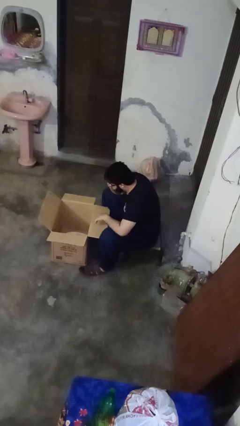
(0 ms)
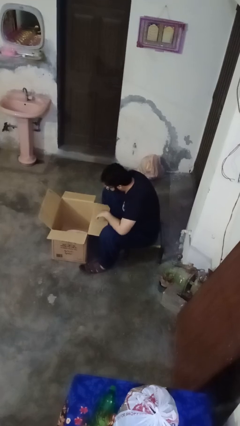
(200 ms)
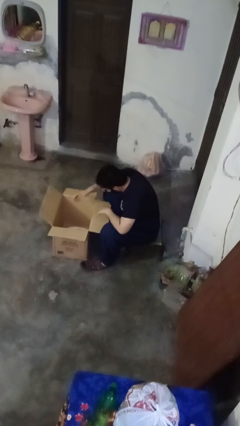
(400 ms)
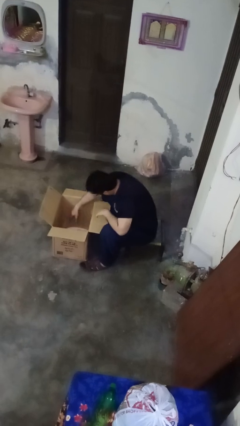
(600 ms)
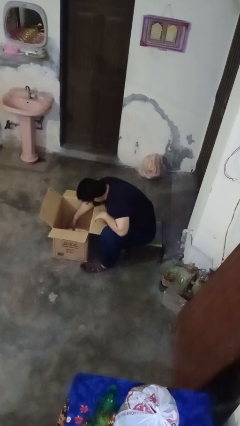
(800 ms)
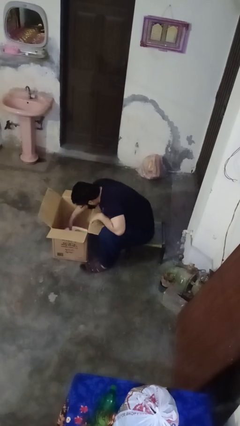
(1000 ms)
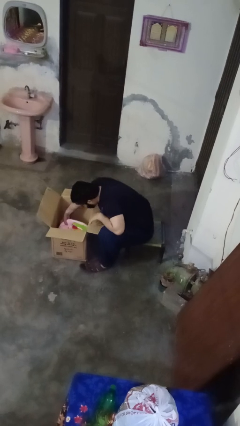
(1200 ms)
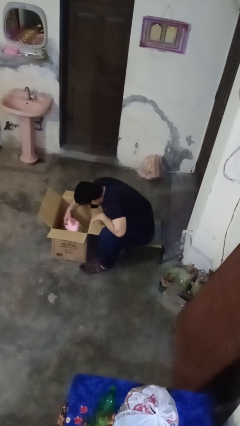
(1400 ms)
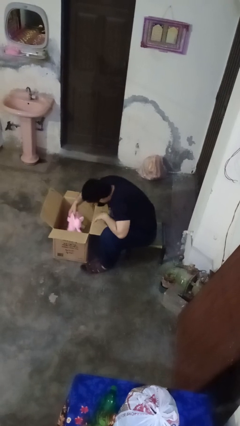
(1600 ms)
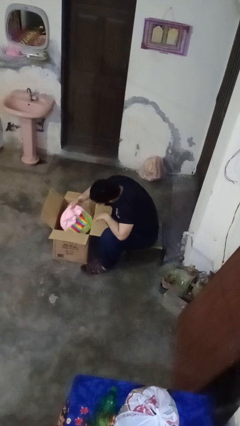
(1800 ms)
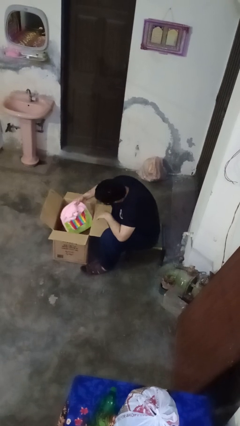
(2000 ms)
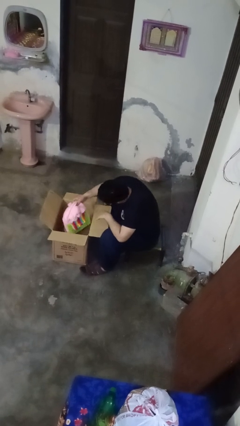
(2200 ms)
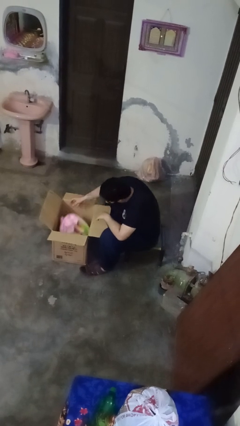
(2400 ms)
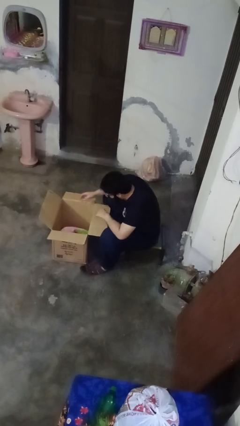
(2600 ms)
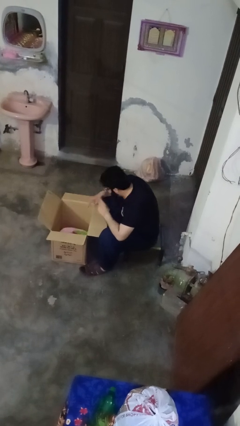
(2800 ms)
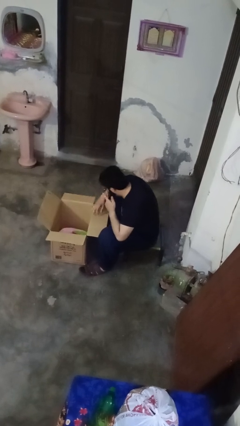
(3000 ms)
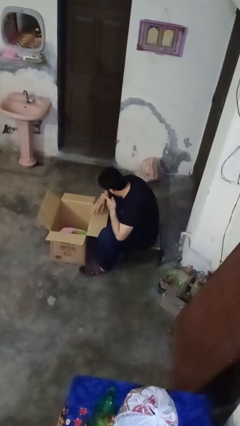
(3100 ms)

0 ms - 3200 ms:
person searches in box

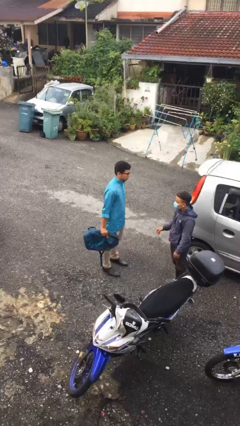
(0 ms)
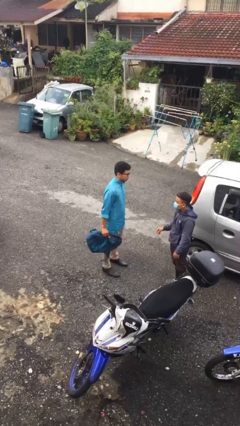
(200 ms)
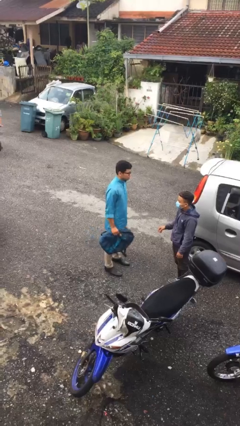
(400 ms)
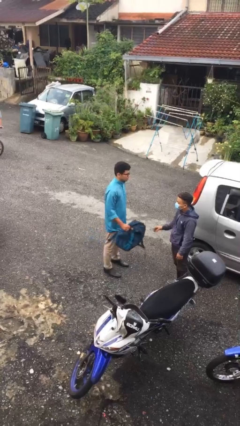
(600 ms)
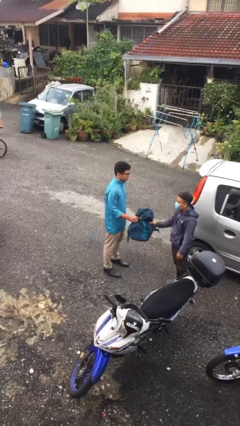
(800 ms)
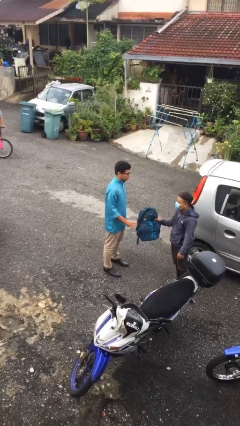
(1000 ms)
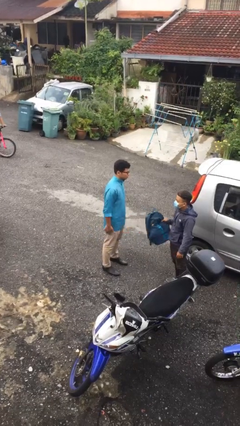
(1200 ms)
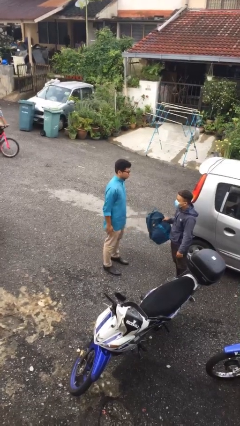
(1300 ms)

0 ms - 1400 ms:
person transfers object to person

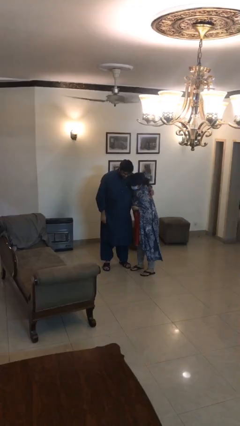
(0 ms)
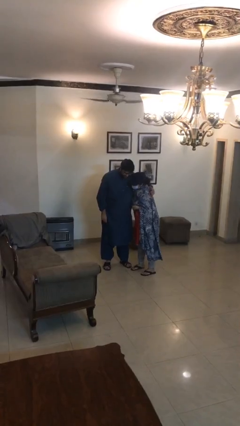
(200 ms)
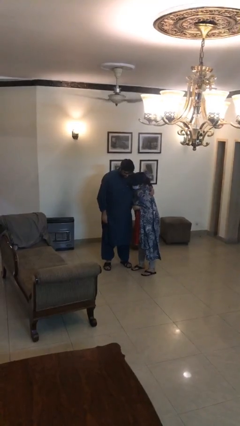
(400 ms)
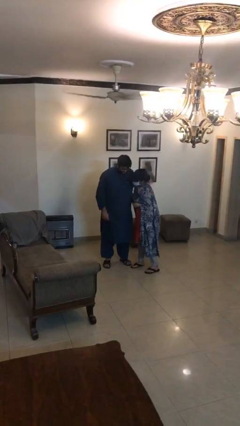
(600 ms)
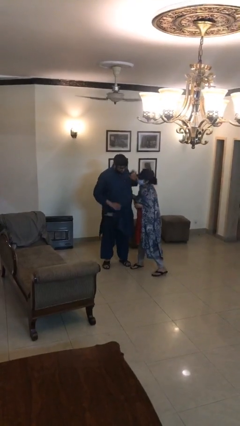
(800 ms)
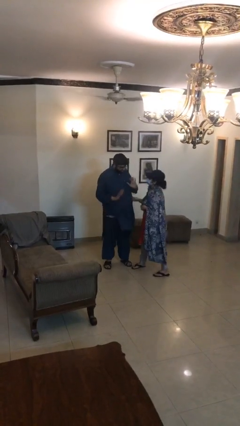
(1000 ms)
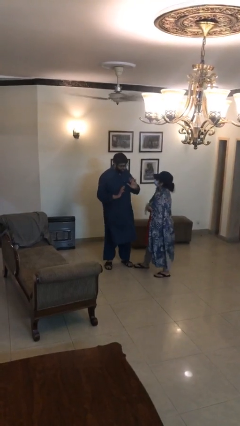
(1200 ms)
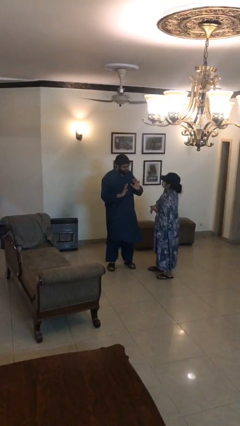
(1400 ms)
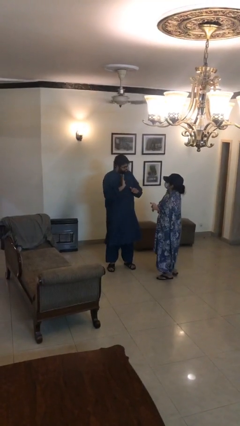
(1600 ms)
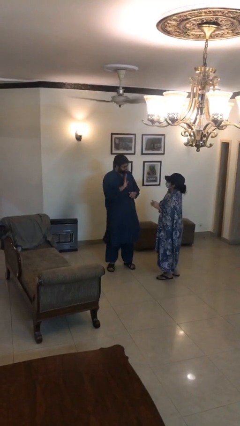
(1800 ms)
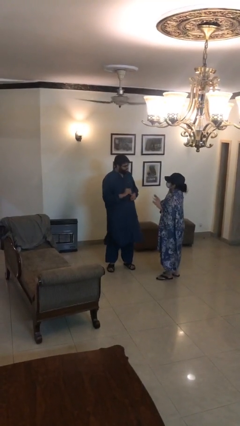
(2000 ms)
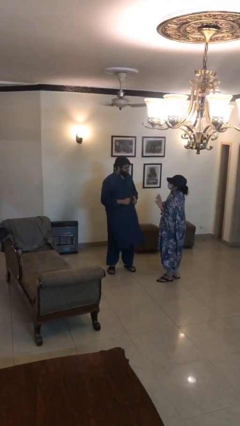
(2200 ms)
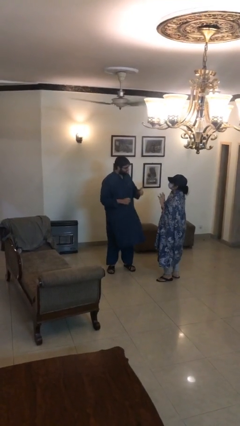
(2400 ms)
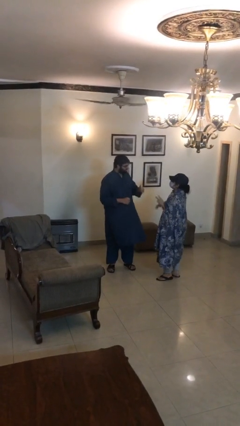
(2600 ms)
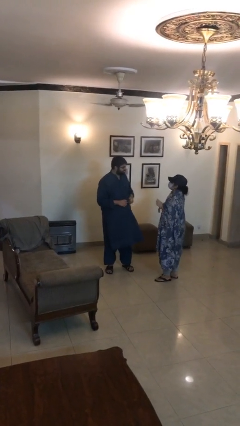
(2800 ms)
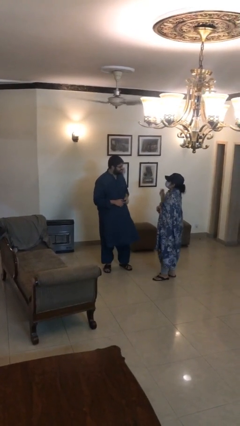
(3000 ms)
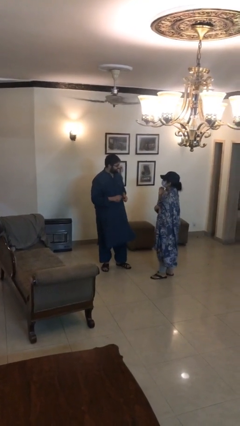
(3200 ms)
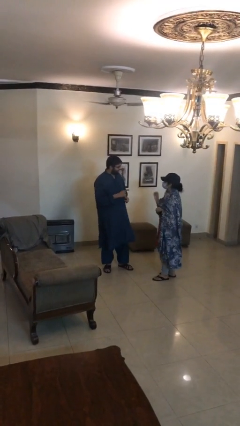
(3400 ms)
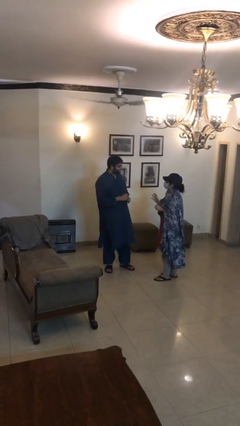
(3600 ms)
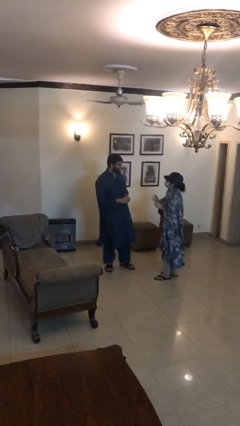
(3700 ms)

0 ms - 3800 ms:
person talks to person

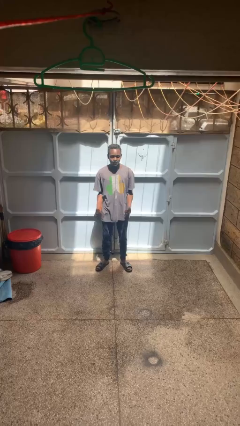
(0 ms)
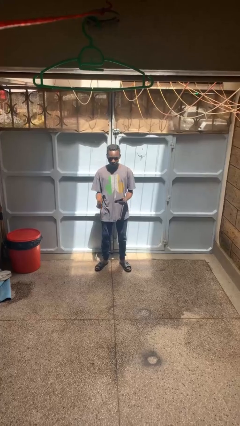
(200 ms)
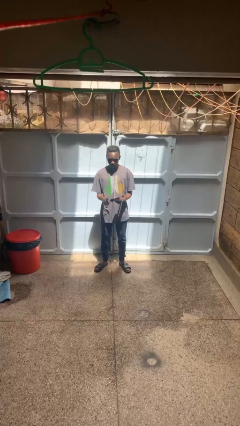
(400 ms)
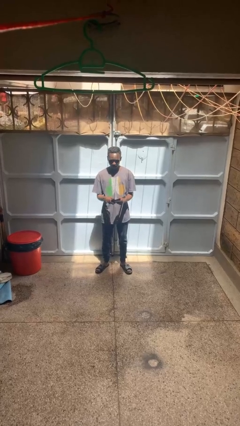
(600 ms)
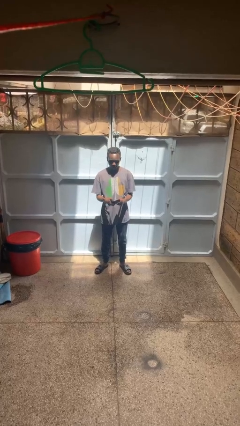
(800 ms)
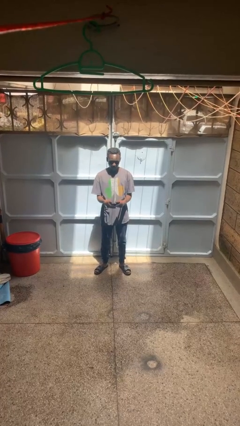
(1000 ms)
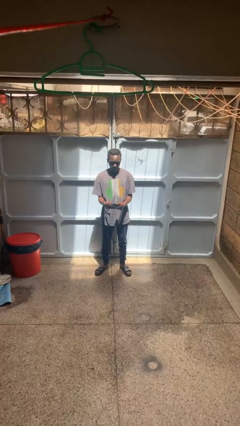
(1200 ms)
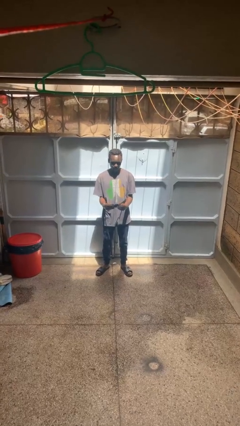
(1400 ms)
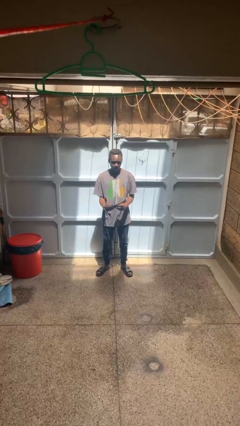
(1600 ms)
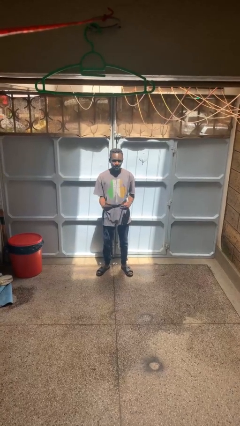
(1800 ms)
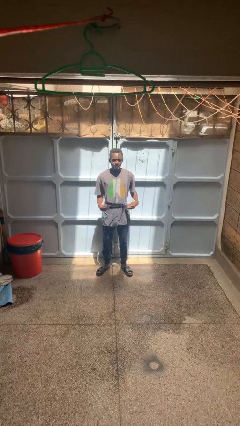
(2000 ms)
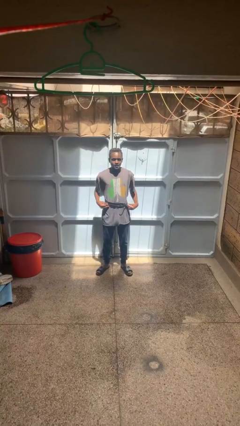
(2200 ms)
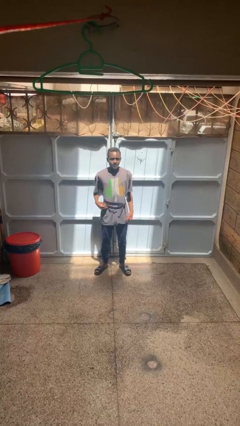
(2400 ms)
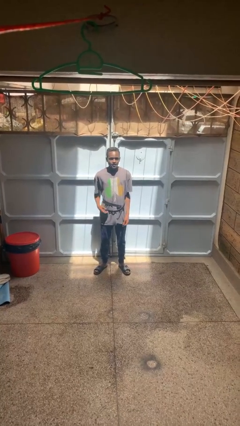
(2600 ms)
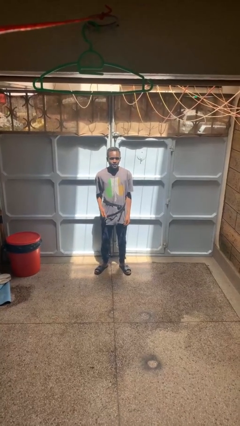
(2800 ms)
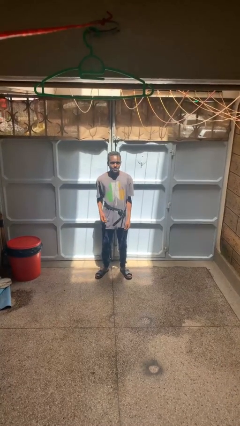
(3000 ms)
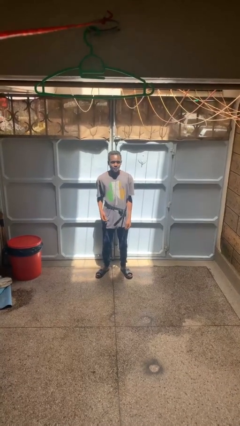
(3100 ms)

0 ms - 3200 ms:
person puts on belt

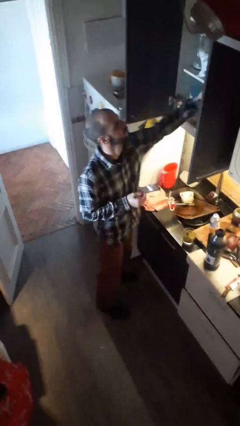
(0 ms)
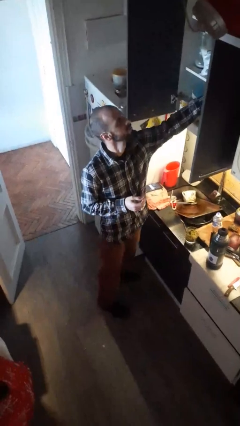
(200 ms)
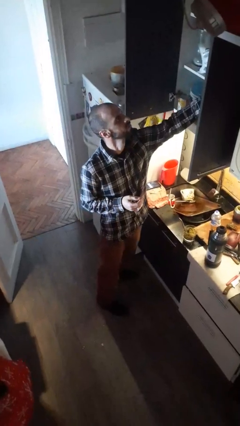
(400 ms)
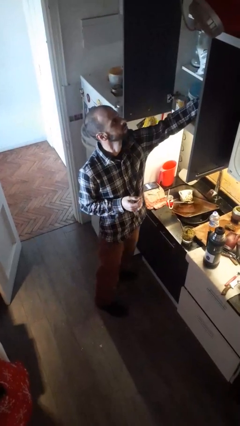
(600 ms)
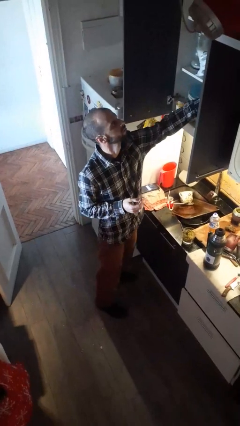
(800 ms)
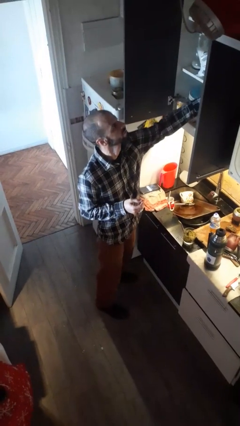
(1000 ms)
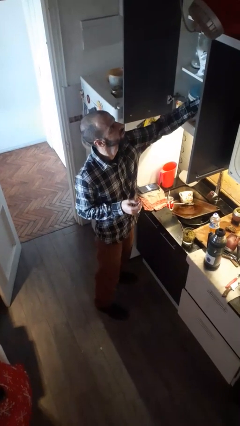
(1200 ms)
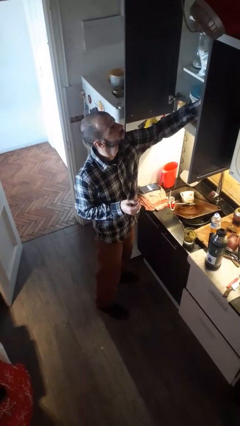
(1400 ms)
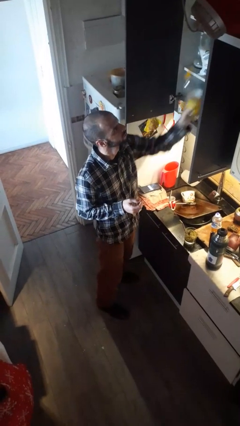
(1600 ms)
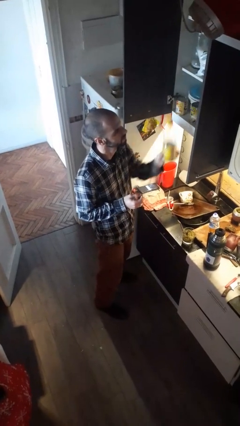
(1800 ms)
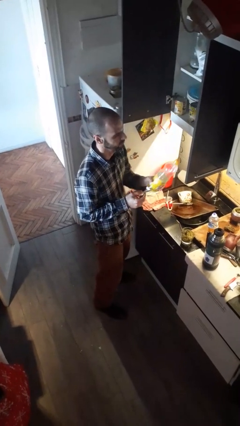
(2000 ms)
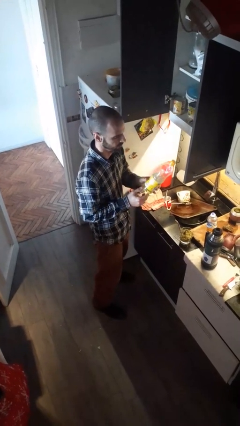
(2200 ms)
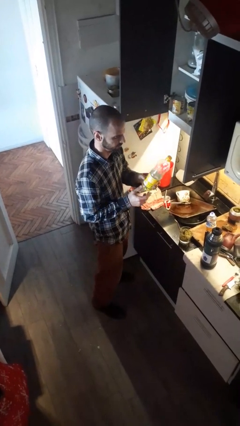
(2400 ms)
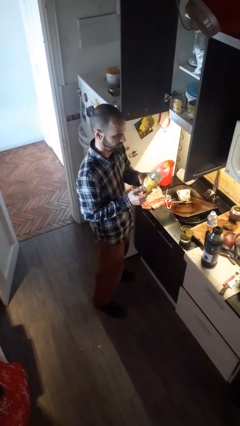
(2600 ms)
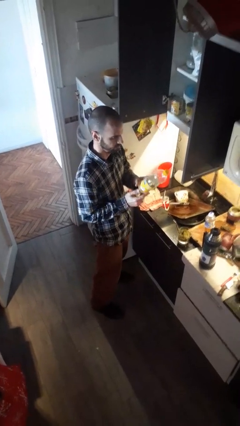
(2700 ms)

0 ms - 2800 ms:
person takes object from kitchen drawer

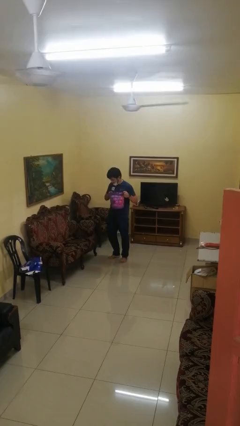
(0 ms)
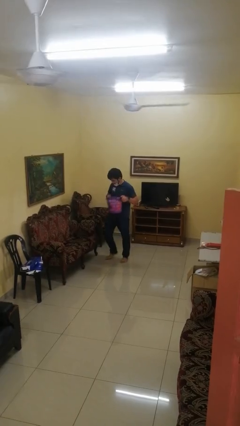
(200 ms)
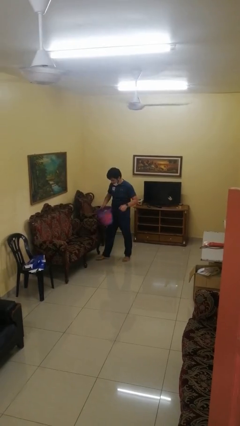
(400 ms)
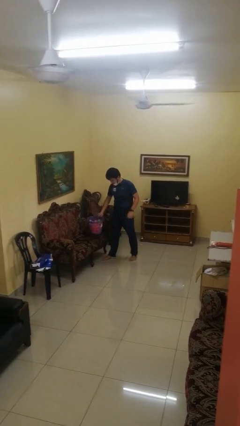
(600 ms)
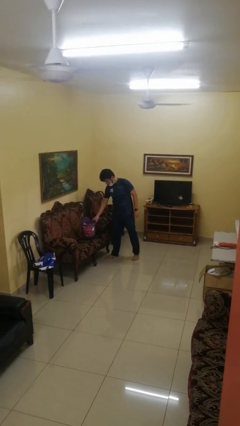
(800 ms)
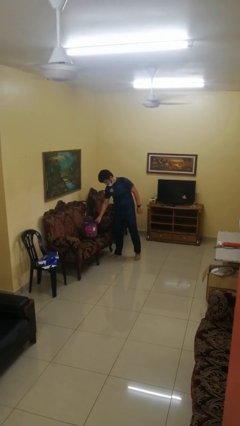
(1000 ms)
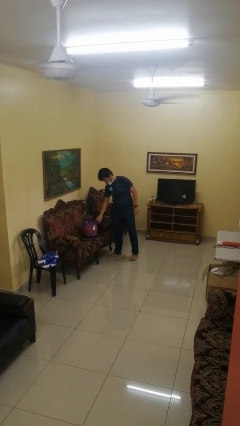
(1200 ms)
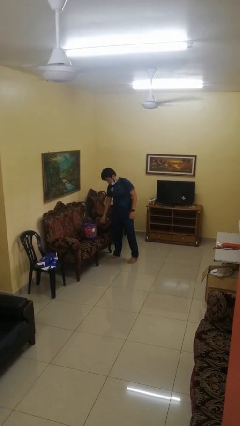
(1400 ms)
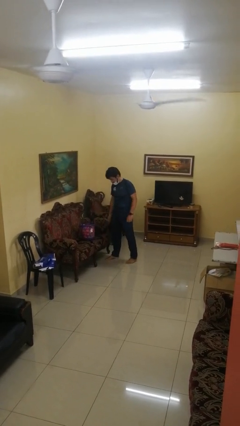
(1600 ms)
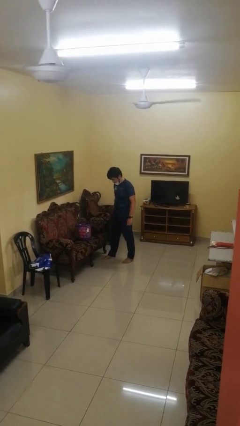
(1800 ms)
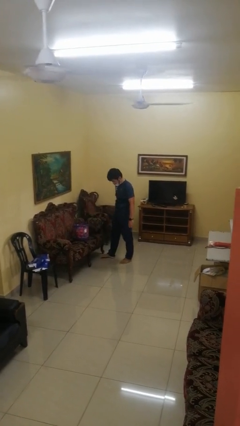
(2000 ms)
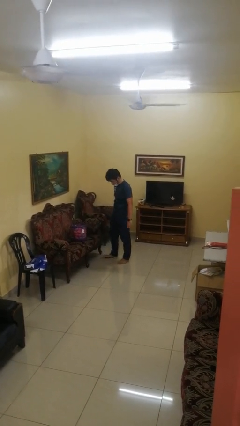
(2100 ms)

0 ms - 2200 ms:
person puts down object on couch

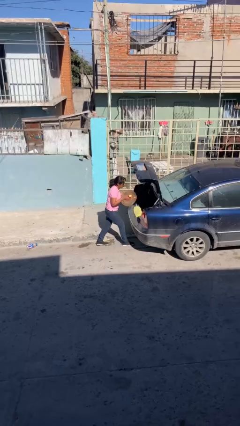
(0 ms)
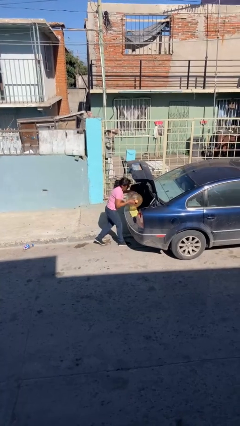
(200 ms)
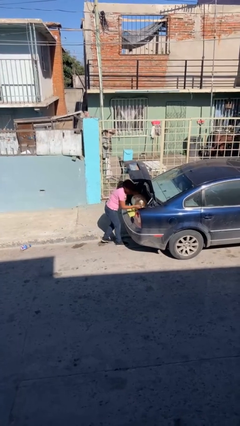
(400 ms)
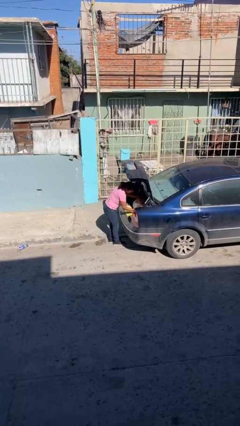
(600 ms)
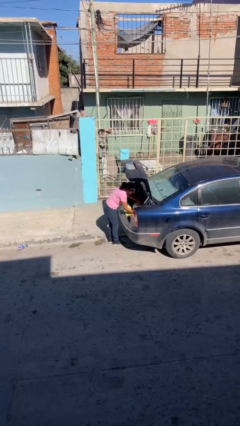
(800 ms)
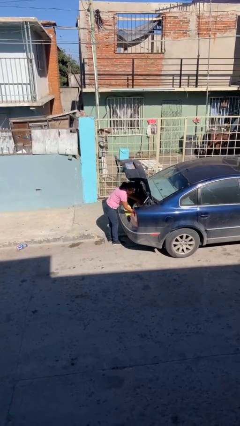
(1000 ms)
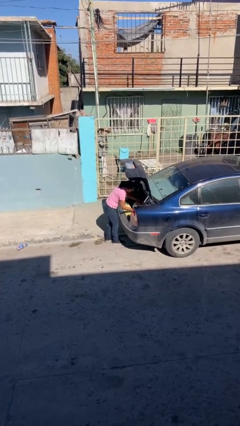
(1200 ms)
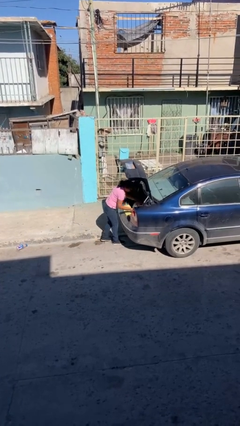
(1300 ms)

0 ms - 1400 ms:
person loads car
